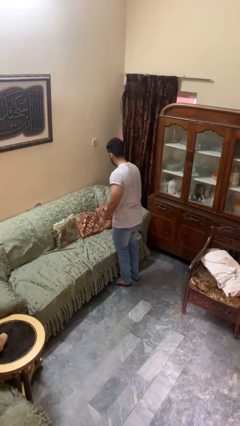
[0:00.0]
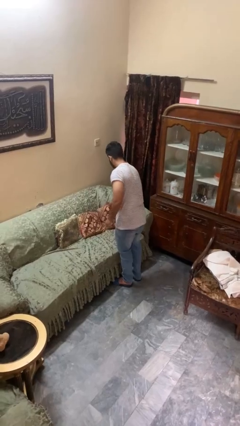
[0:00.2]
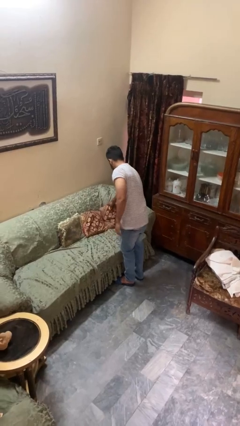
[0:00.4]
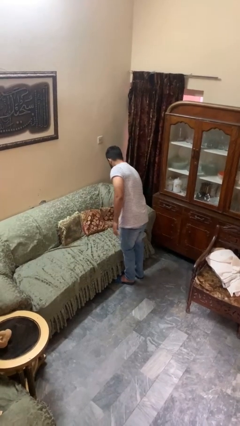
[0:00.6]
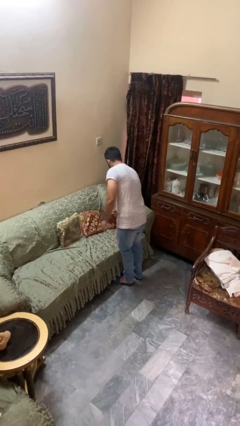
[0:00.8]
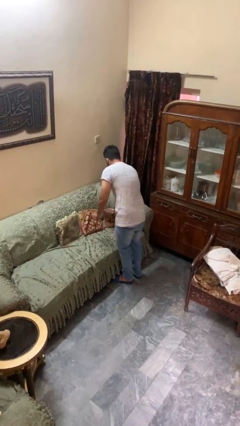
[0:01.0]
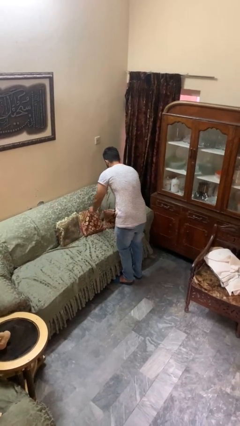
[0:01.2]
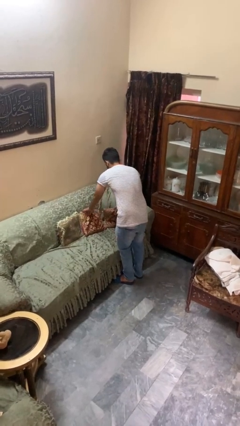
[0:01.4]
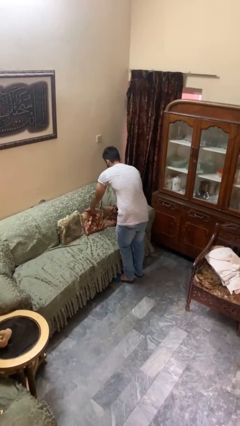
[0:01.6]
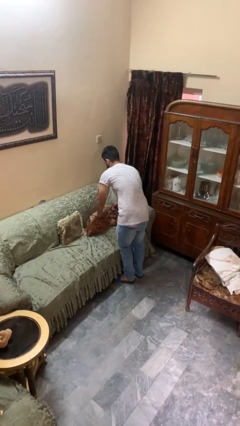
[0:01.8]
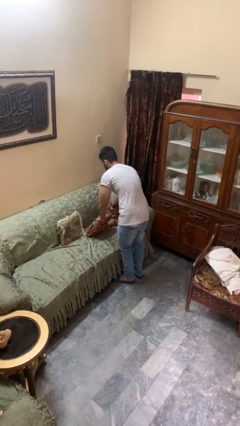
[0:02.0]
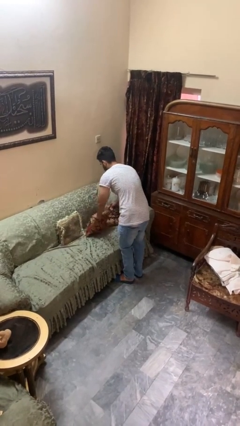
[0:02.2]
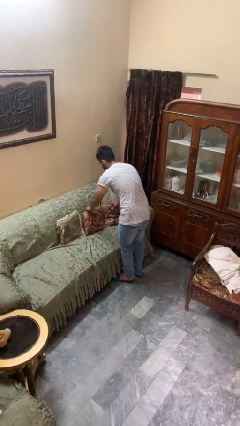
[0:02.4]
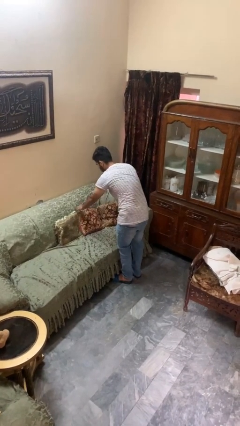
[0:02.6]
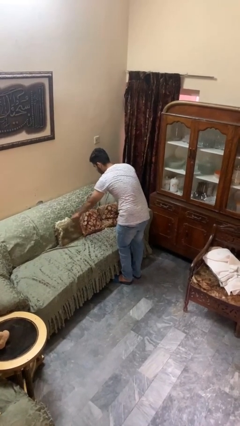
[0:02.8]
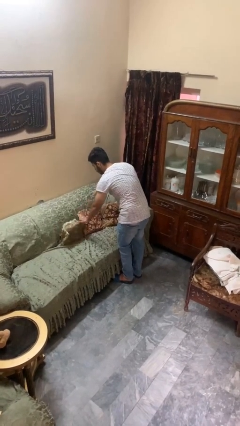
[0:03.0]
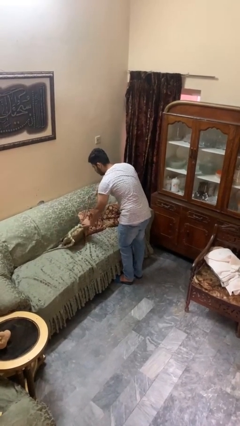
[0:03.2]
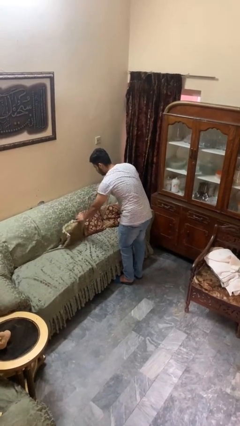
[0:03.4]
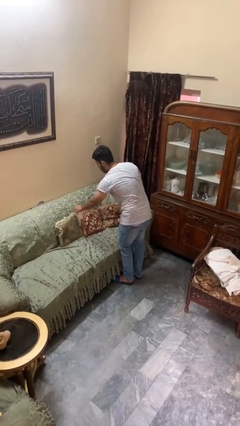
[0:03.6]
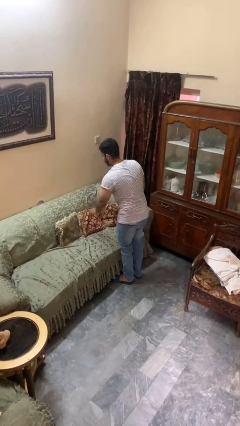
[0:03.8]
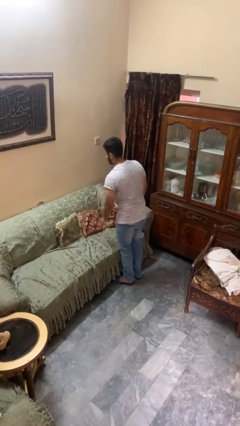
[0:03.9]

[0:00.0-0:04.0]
person searches in couch

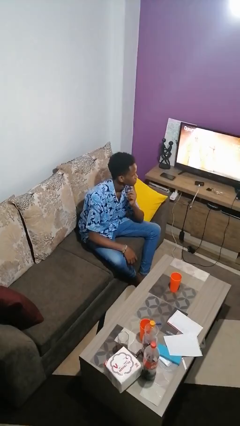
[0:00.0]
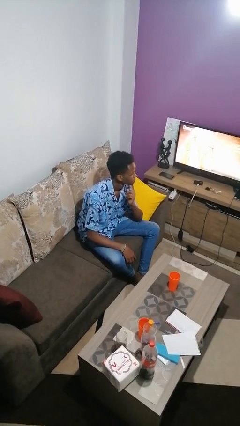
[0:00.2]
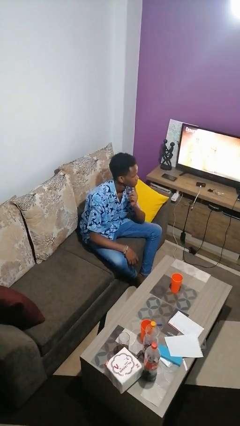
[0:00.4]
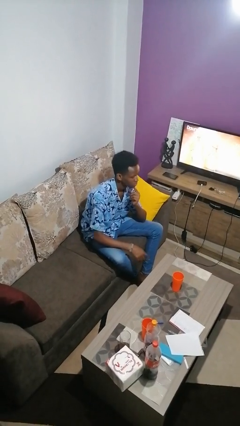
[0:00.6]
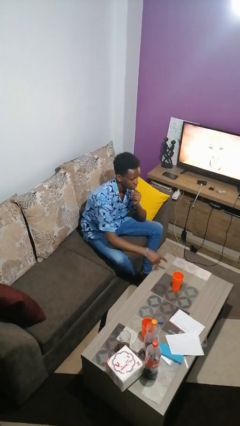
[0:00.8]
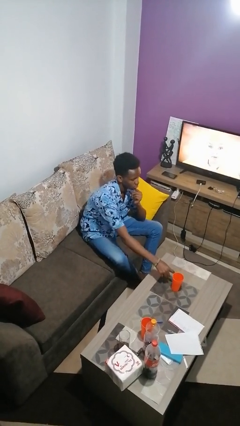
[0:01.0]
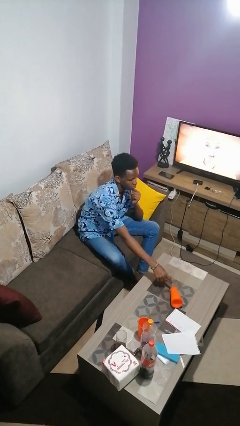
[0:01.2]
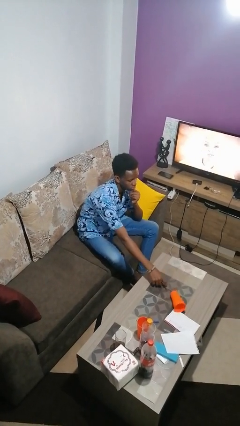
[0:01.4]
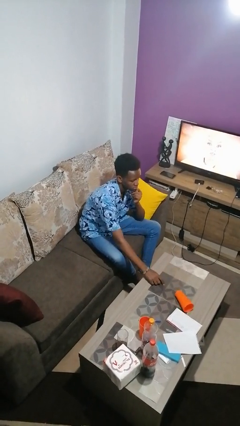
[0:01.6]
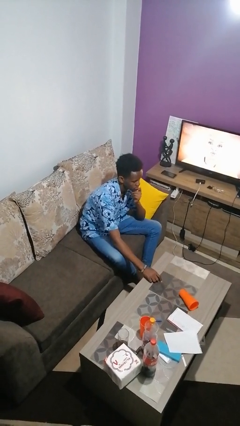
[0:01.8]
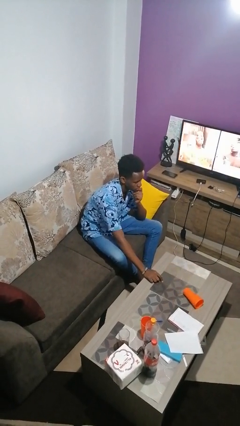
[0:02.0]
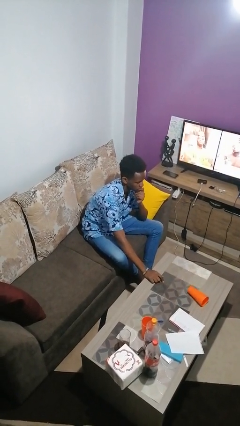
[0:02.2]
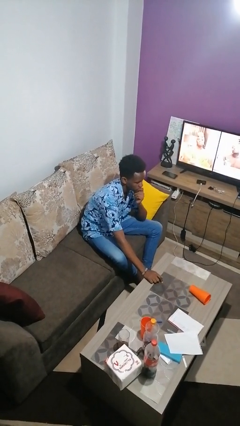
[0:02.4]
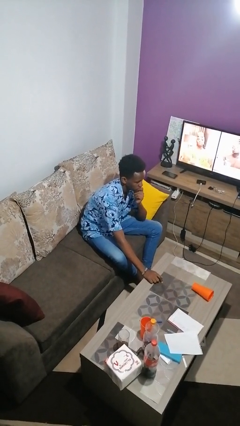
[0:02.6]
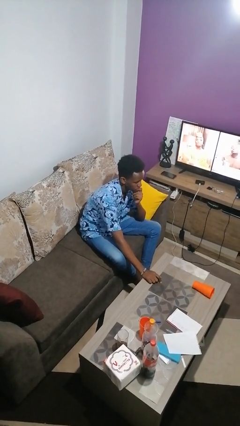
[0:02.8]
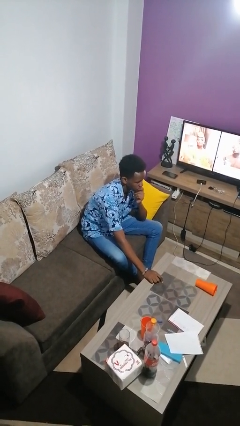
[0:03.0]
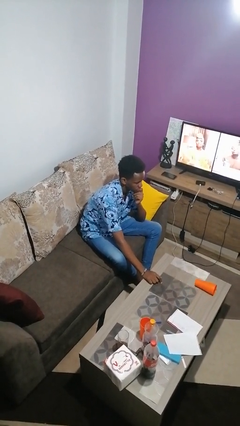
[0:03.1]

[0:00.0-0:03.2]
person knocks over glass

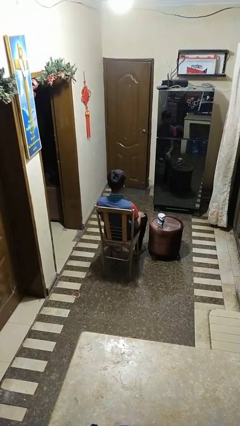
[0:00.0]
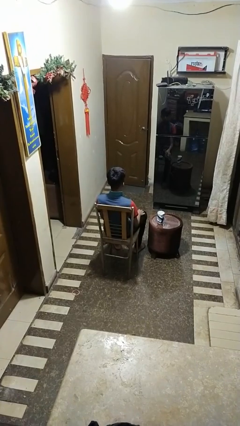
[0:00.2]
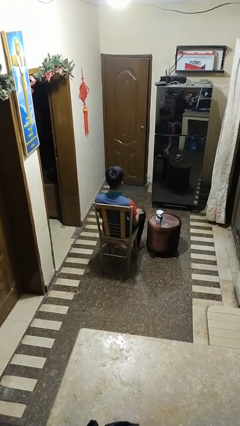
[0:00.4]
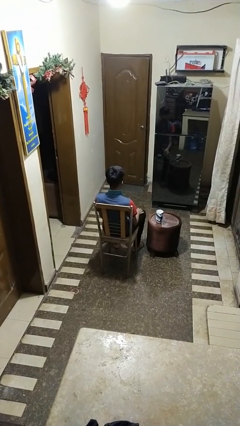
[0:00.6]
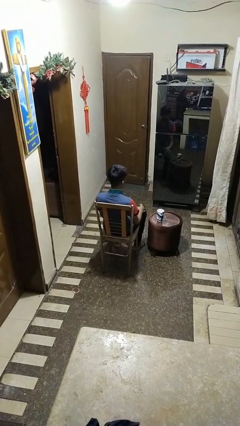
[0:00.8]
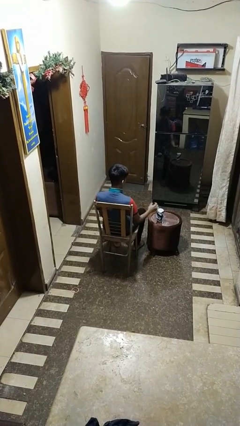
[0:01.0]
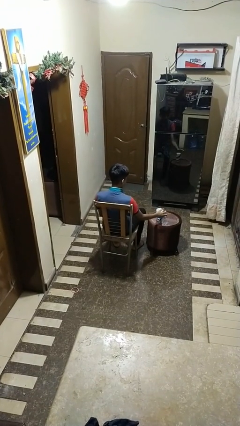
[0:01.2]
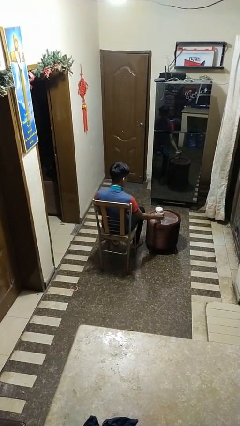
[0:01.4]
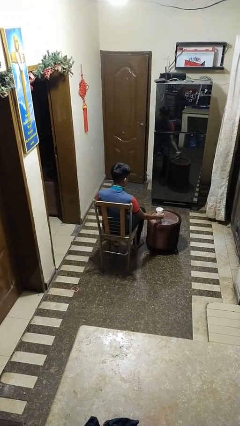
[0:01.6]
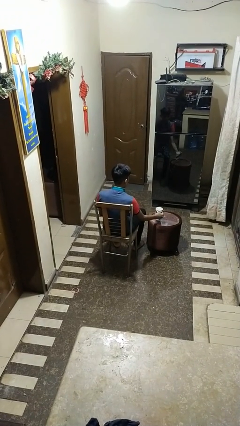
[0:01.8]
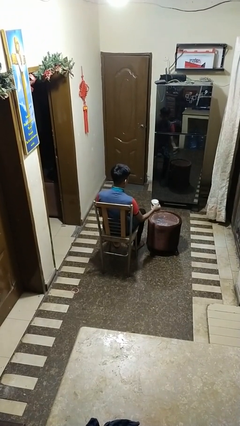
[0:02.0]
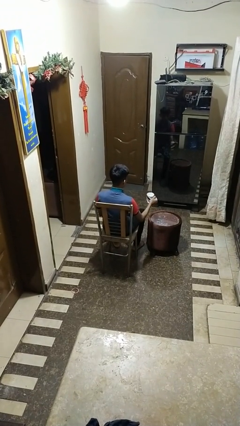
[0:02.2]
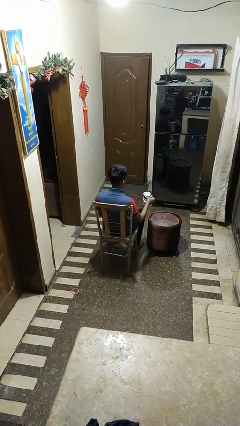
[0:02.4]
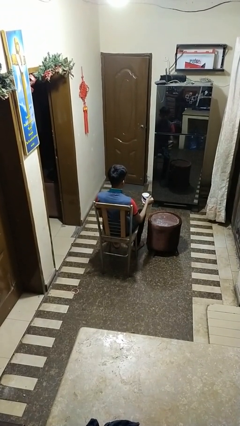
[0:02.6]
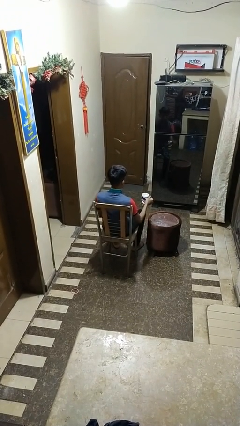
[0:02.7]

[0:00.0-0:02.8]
person picks up object from table

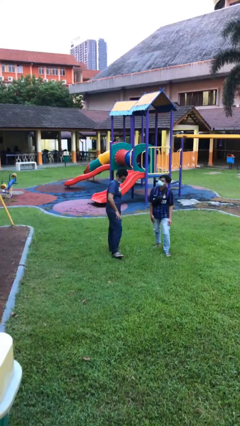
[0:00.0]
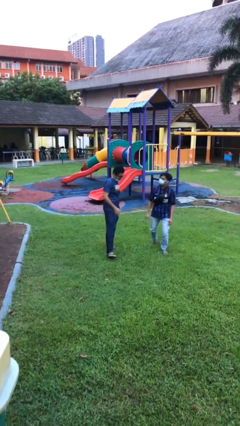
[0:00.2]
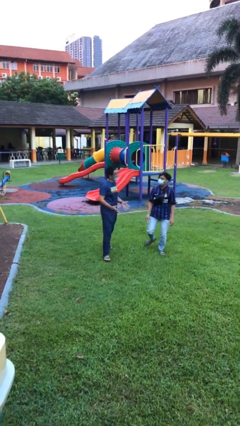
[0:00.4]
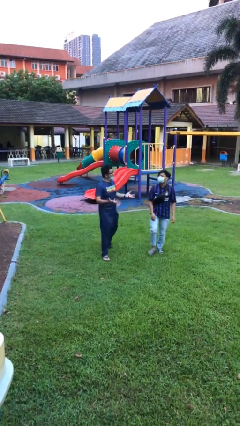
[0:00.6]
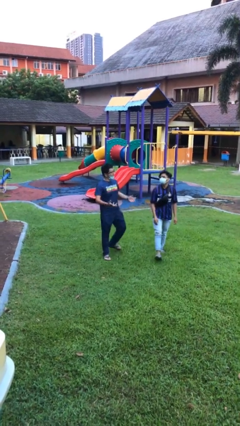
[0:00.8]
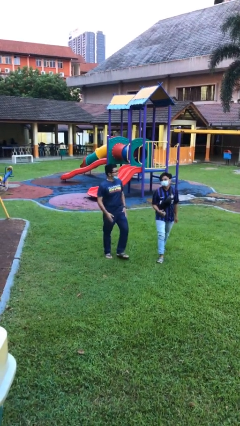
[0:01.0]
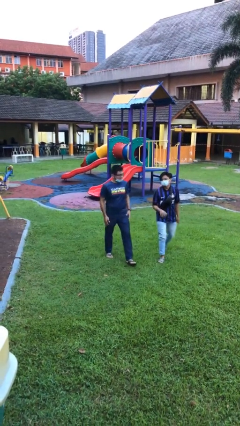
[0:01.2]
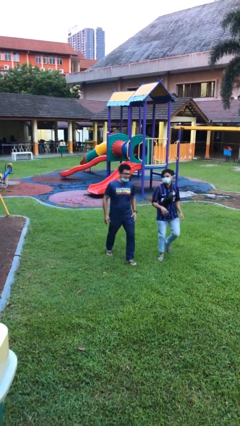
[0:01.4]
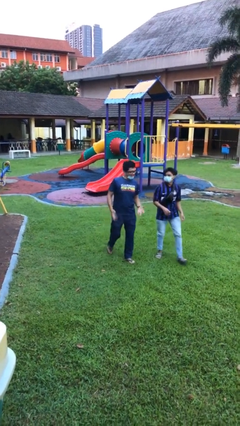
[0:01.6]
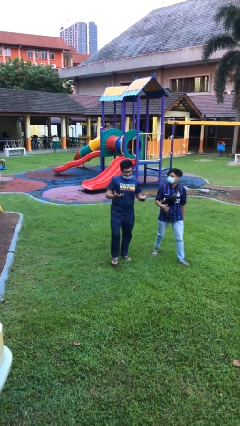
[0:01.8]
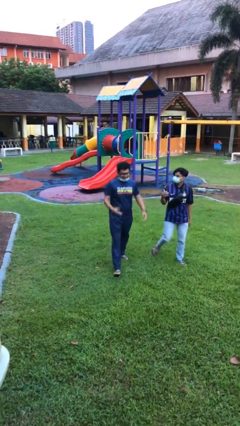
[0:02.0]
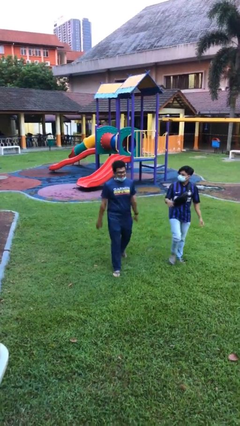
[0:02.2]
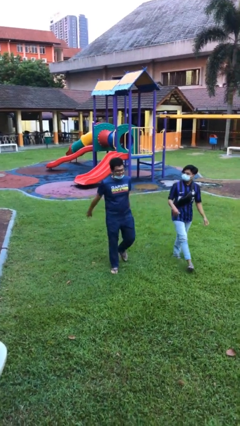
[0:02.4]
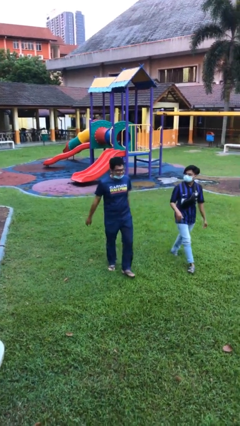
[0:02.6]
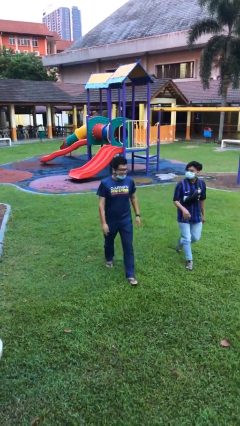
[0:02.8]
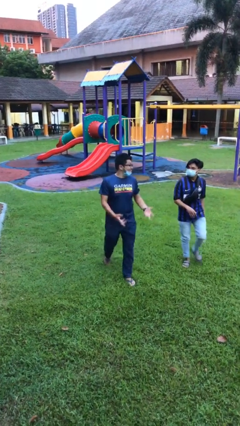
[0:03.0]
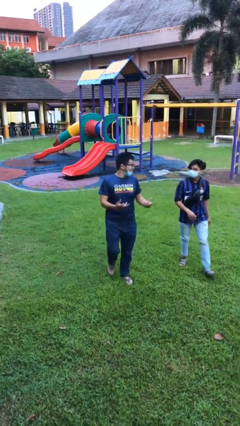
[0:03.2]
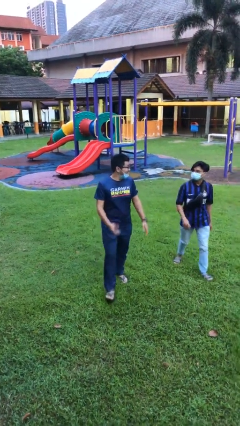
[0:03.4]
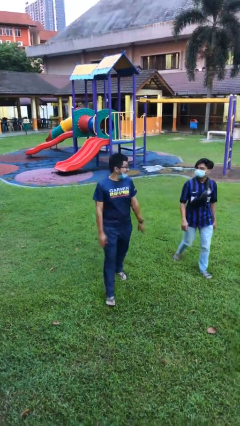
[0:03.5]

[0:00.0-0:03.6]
person talks to person

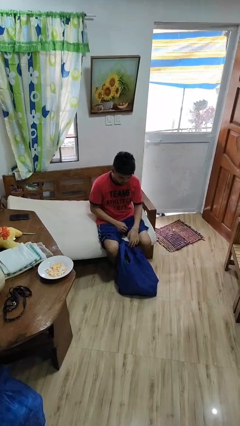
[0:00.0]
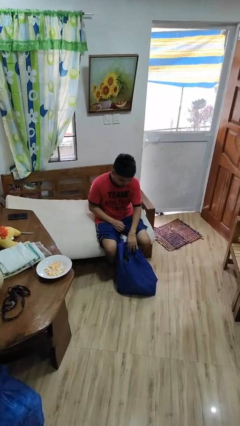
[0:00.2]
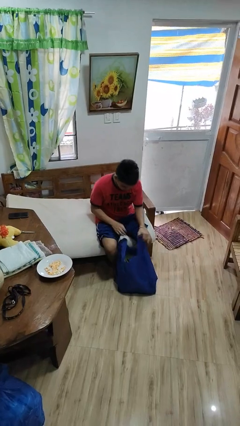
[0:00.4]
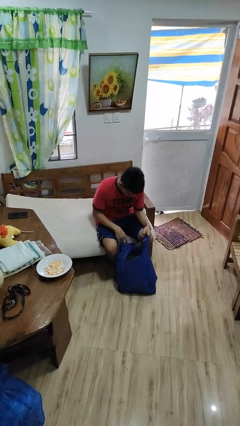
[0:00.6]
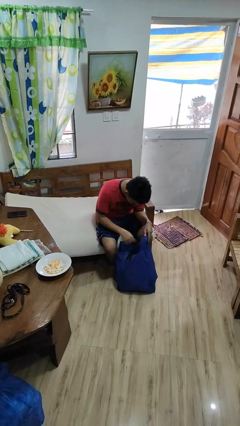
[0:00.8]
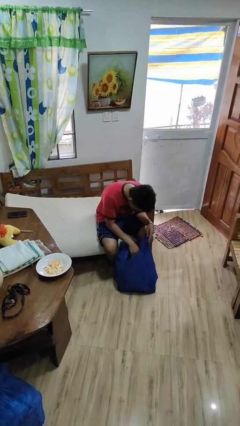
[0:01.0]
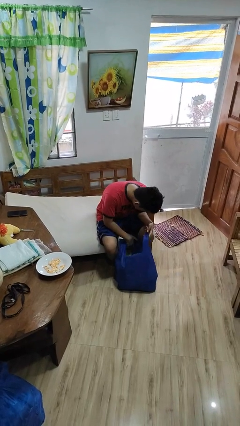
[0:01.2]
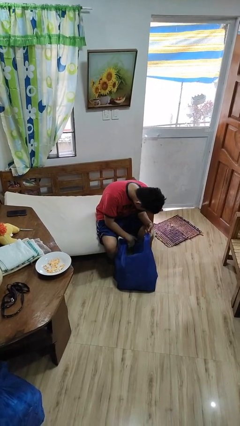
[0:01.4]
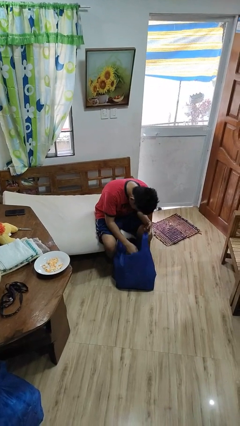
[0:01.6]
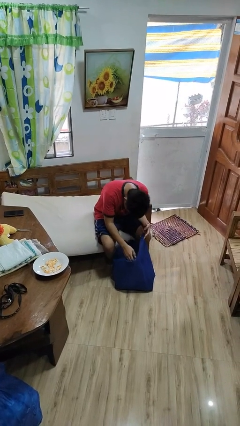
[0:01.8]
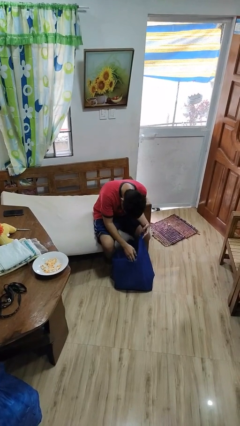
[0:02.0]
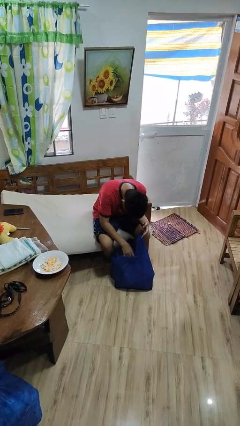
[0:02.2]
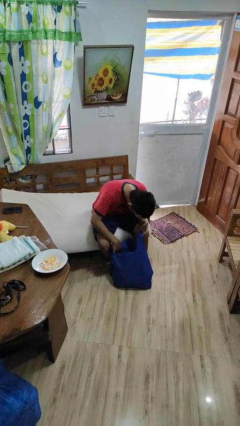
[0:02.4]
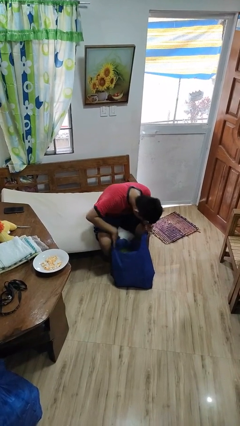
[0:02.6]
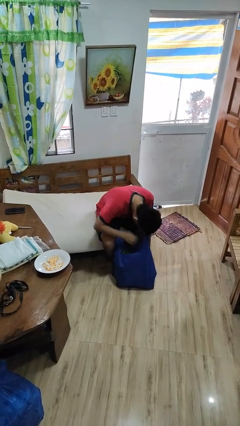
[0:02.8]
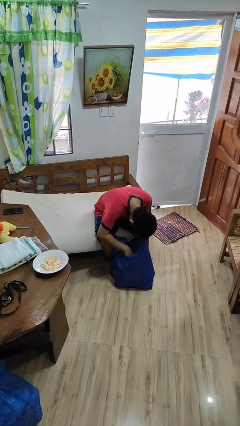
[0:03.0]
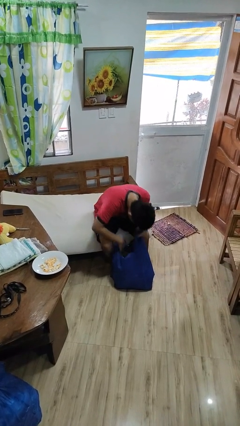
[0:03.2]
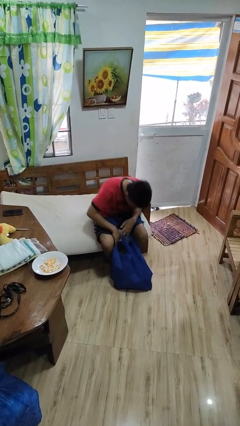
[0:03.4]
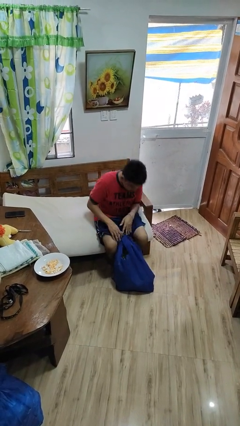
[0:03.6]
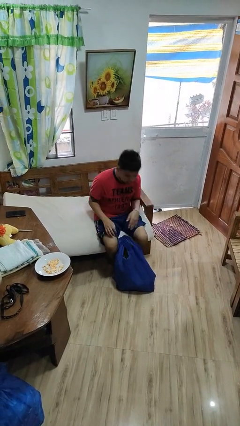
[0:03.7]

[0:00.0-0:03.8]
person searches in bag

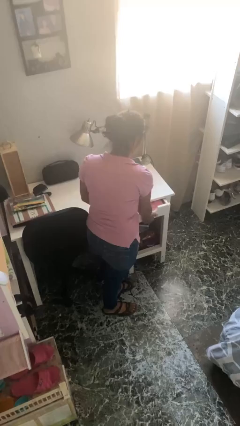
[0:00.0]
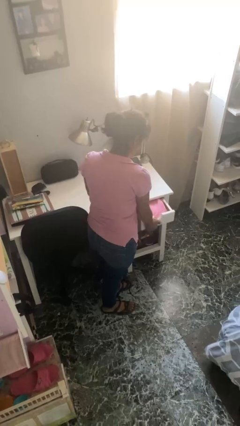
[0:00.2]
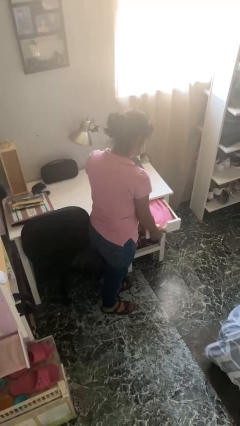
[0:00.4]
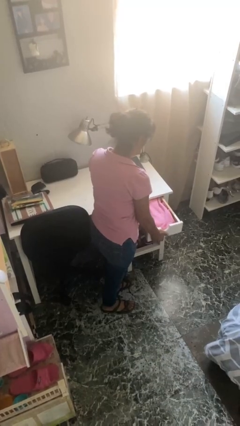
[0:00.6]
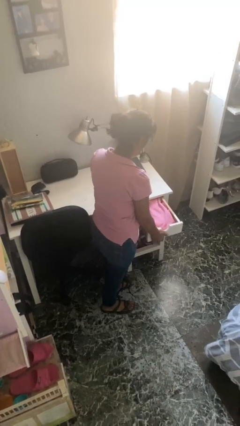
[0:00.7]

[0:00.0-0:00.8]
person opens dresser drawer
